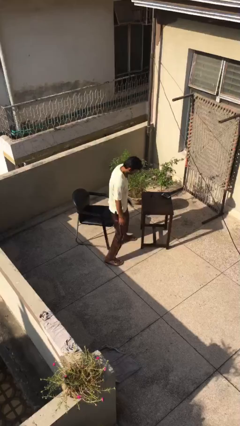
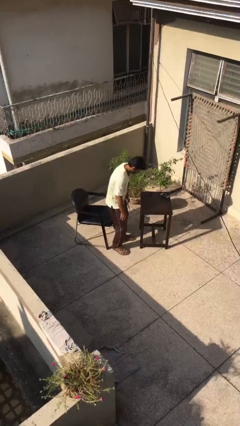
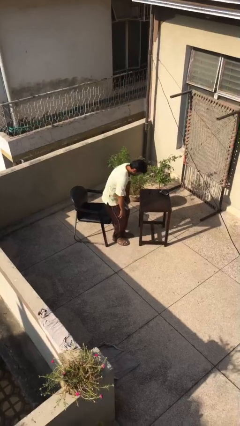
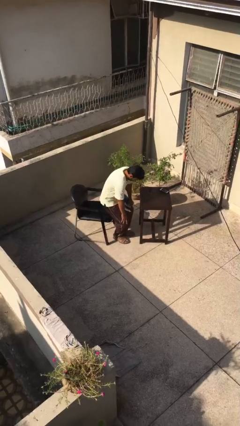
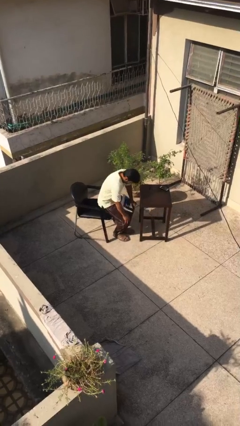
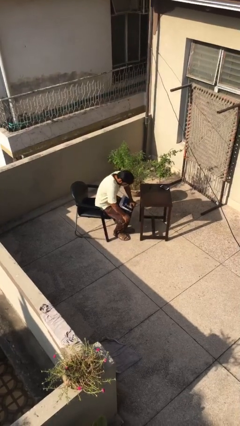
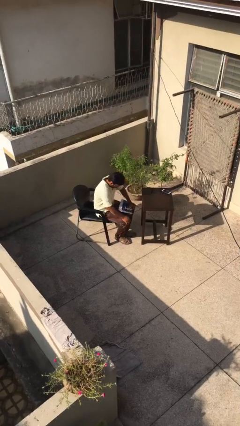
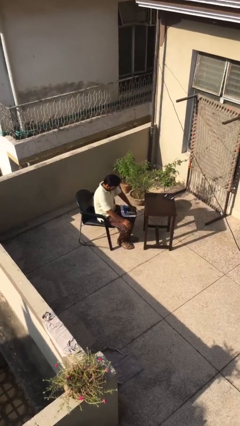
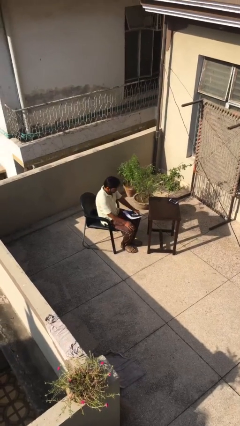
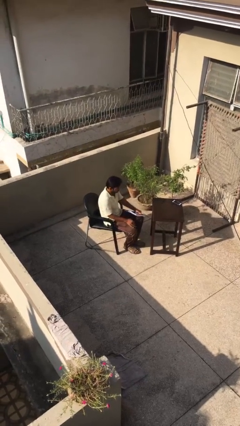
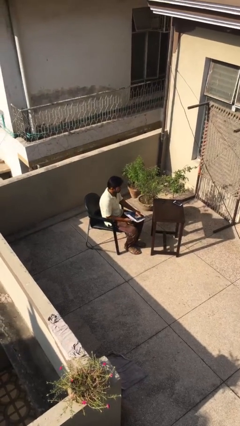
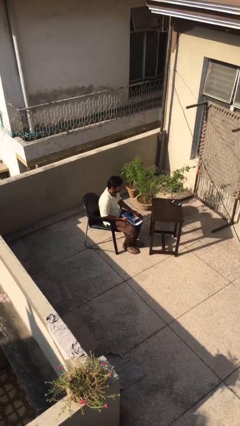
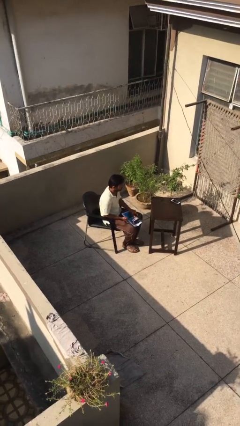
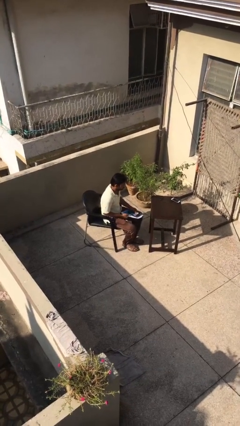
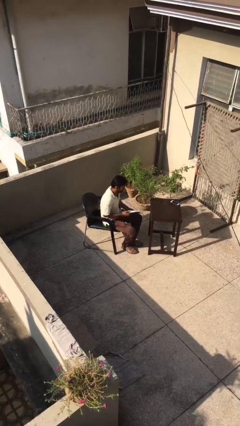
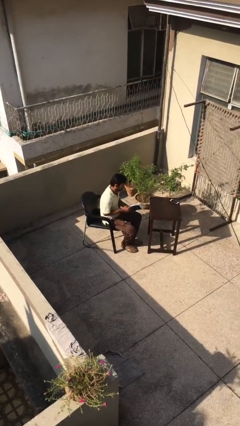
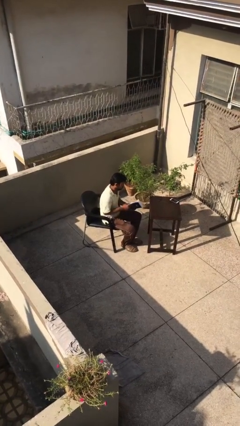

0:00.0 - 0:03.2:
person sits down

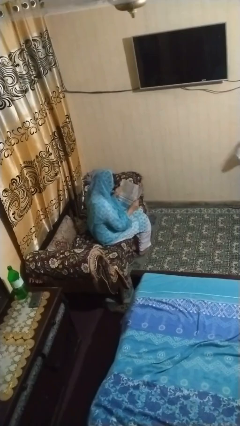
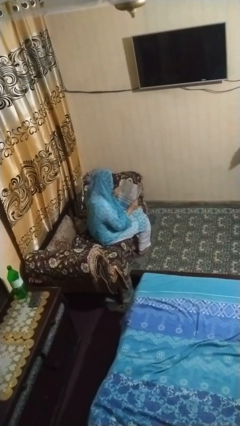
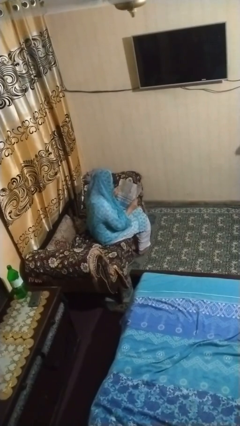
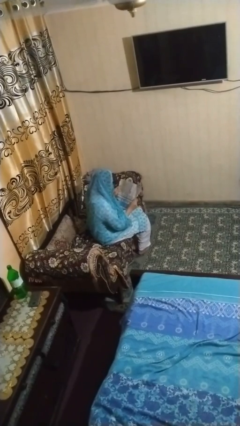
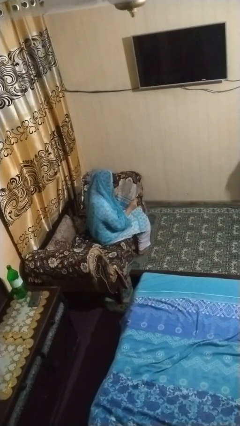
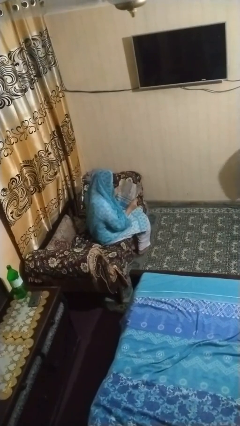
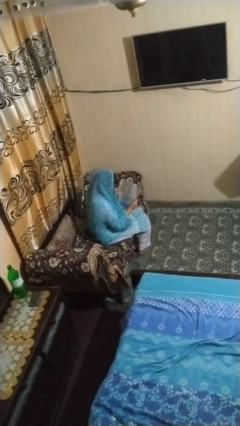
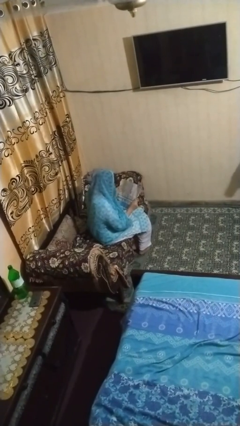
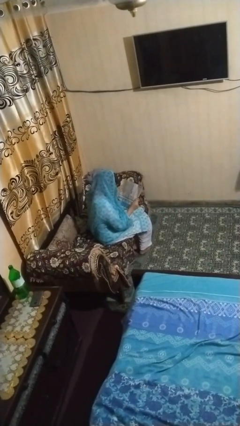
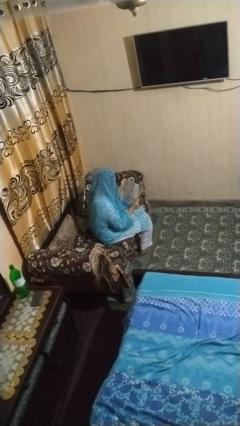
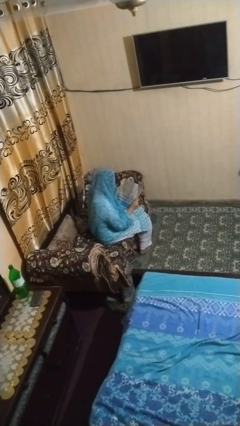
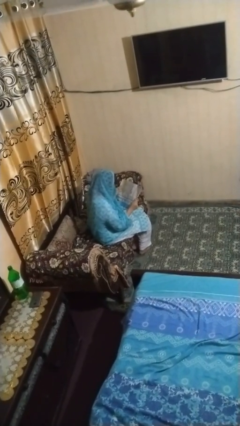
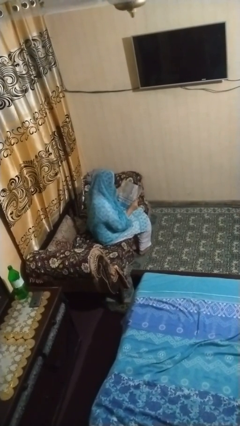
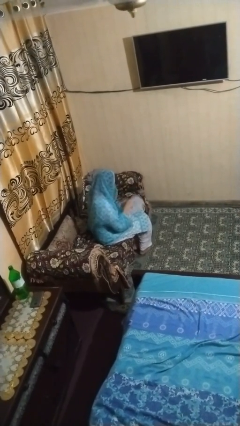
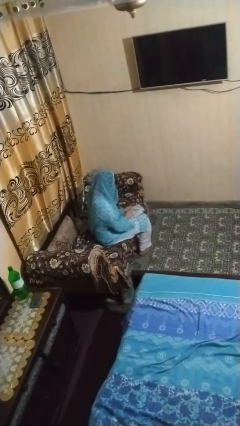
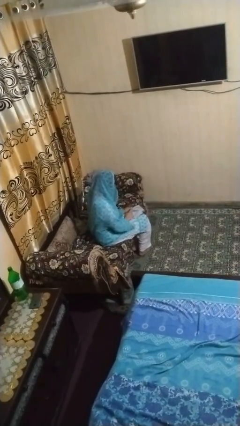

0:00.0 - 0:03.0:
person reads newspaper

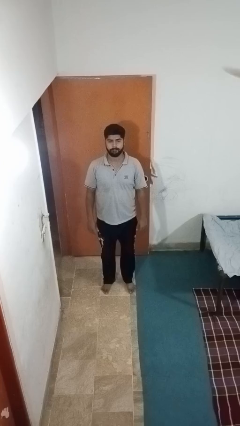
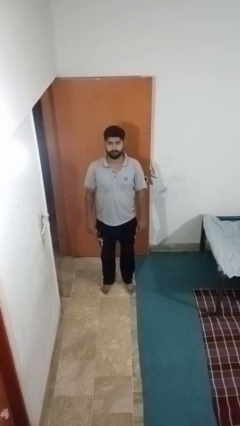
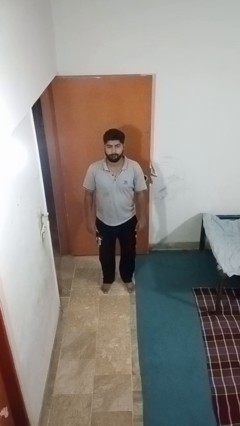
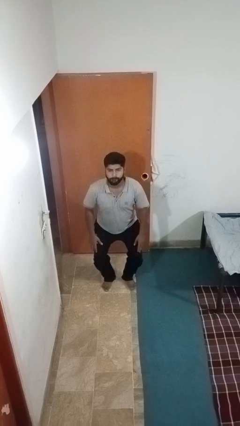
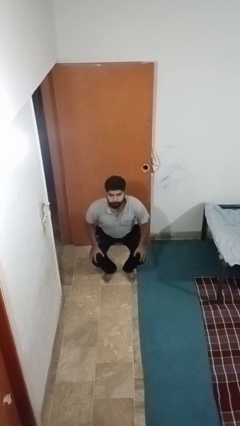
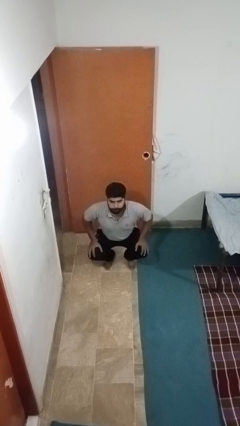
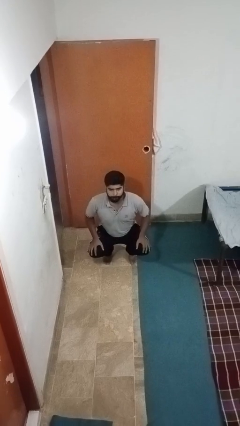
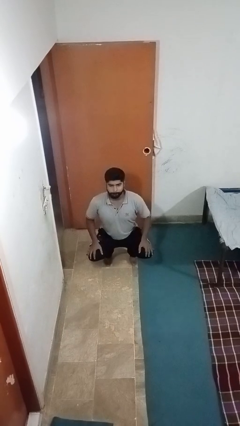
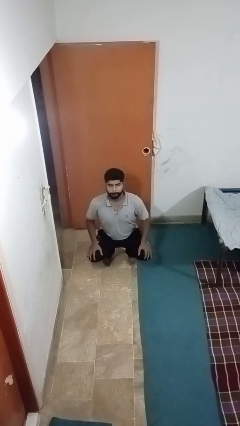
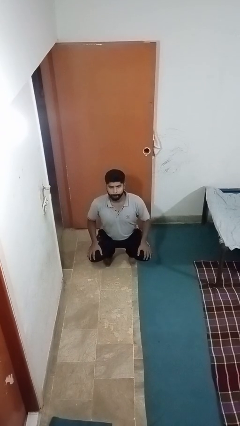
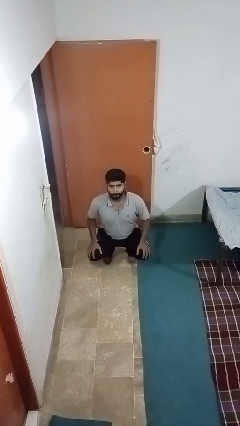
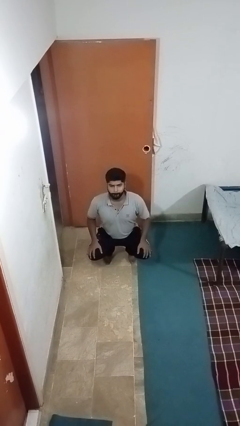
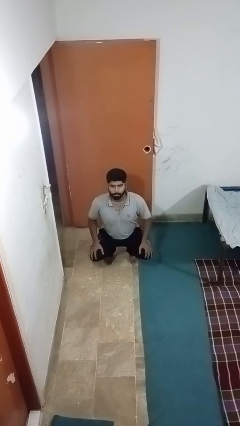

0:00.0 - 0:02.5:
person squats

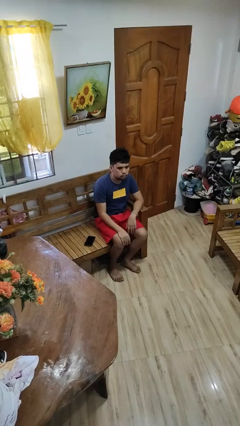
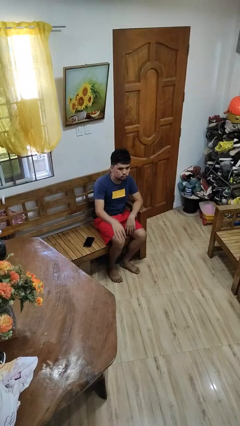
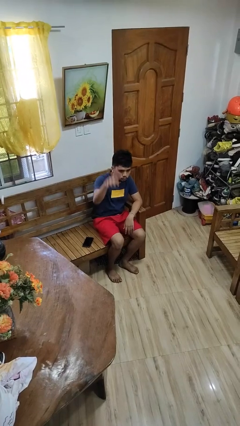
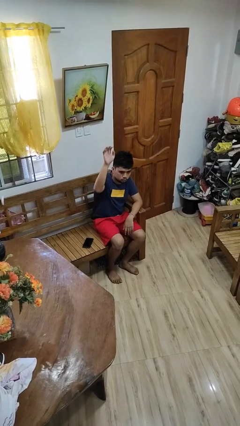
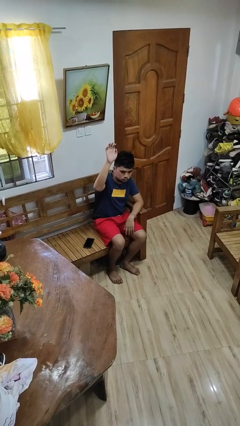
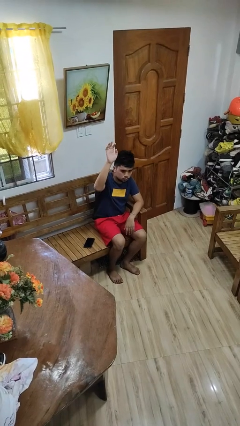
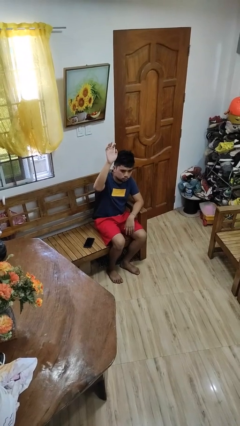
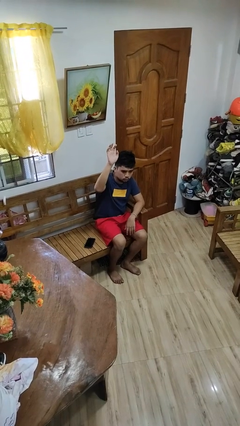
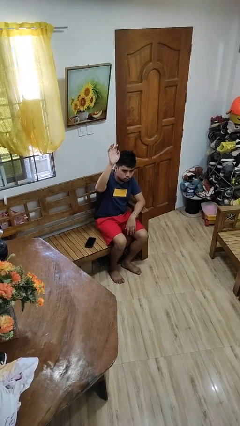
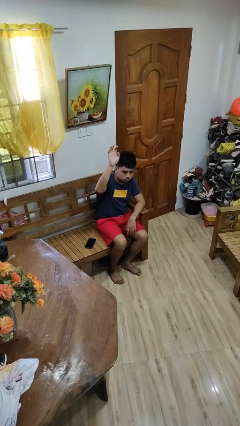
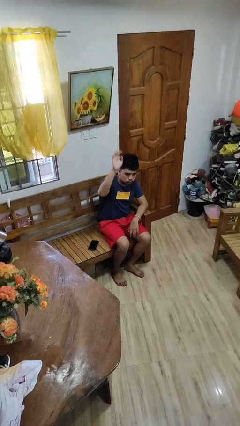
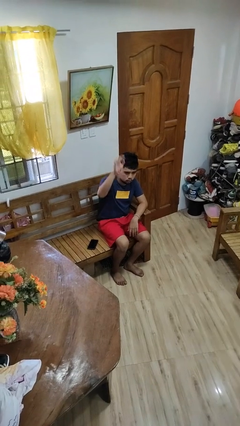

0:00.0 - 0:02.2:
person gestures raise hand

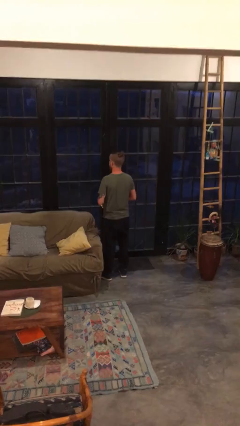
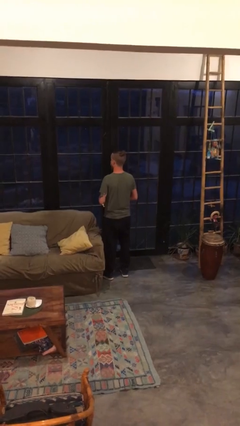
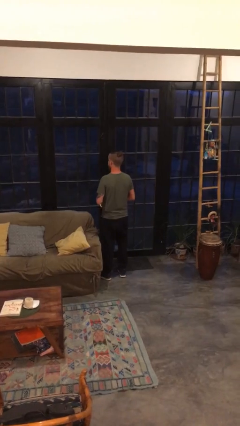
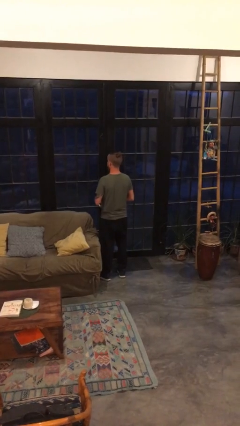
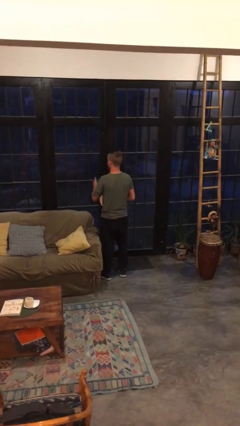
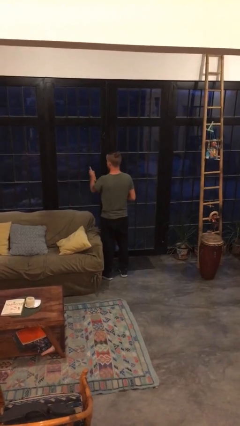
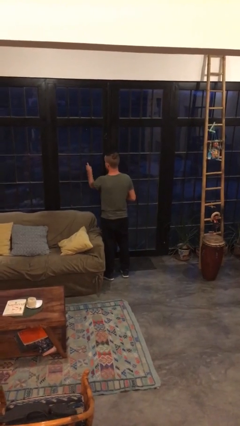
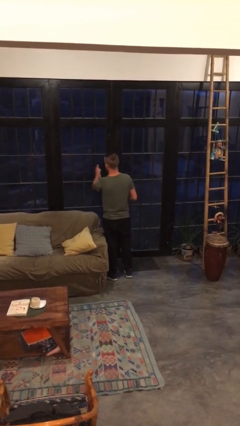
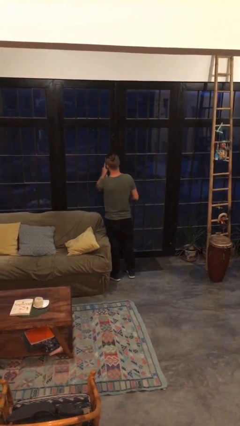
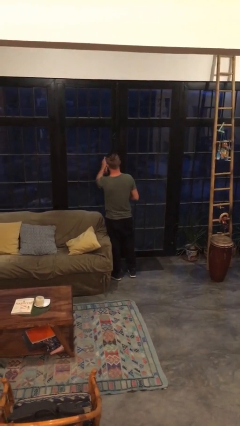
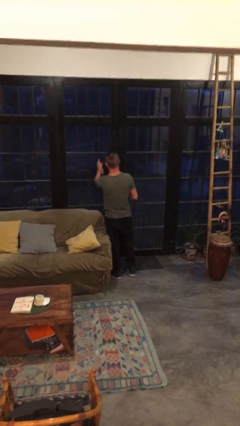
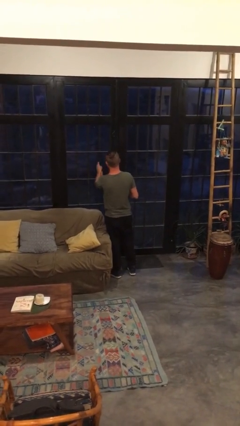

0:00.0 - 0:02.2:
person sprays from bottle

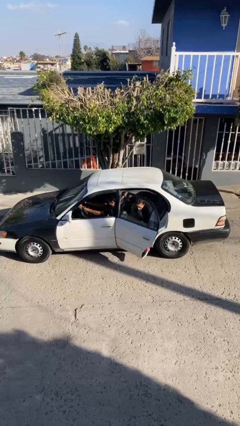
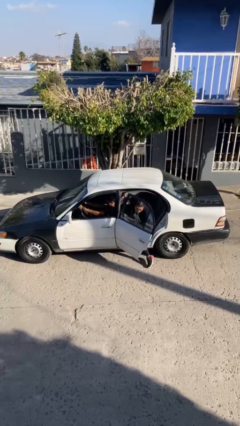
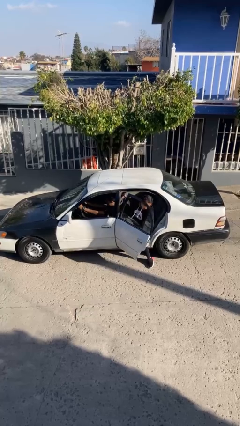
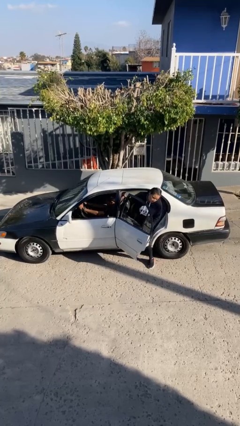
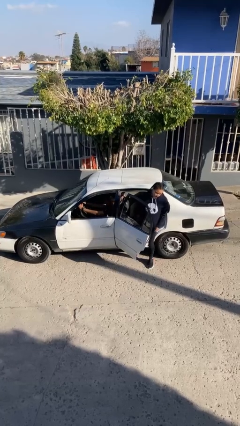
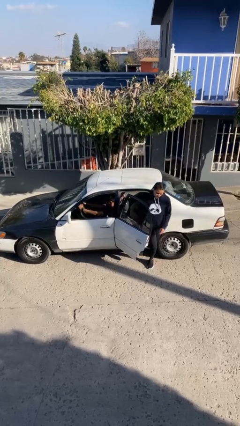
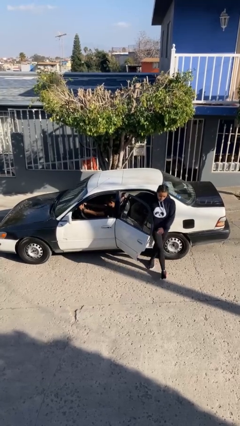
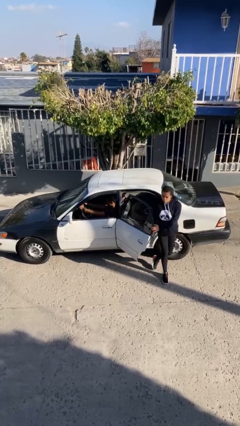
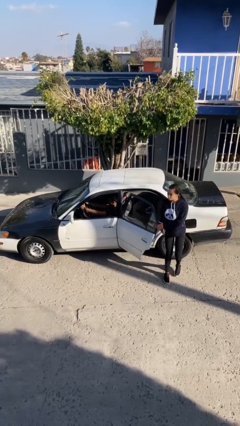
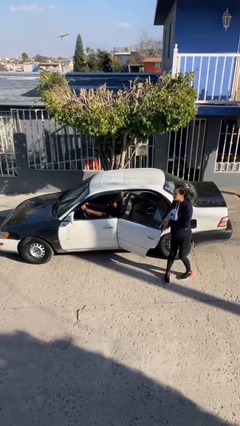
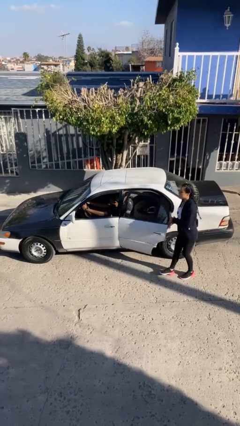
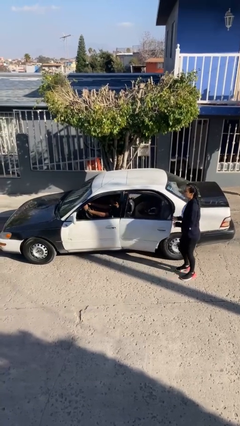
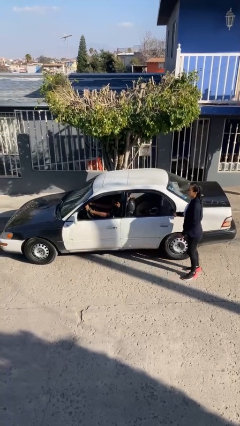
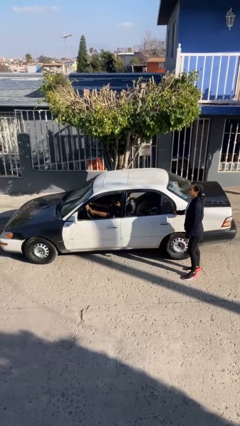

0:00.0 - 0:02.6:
car drops off person

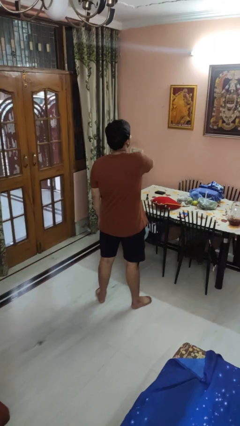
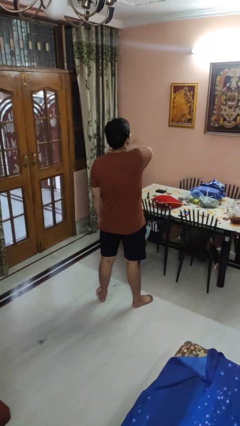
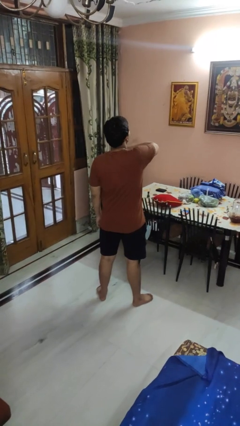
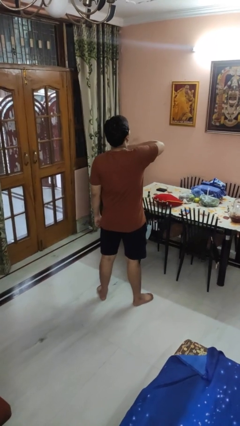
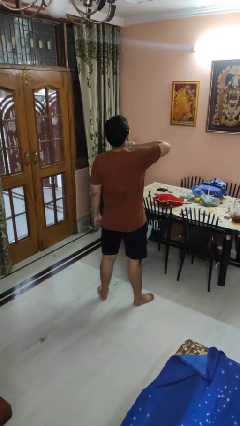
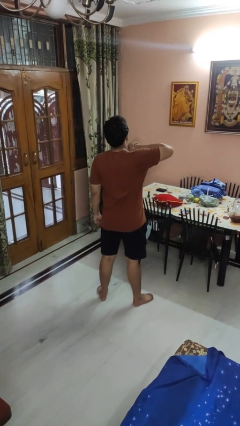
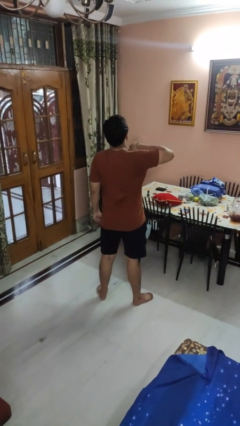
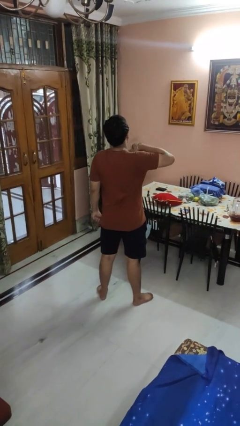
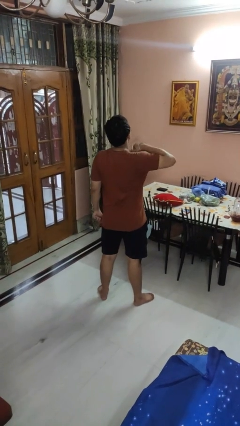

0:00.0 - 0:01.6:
person gestures cut
